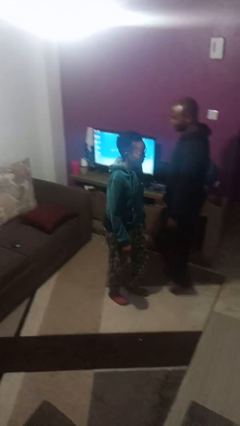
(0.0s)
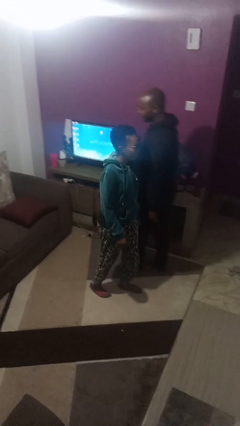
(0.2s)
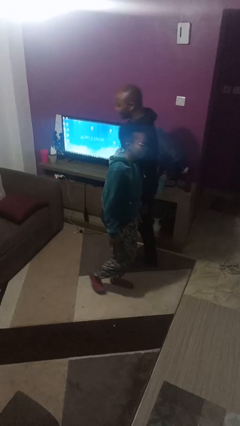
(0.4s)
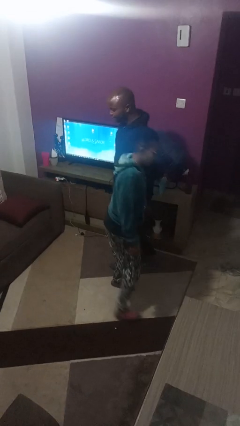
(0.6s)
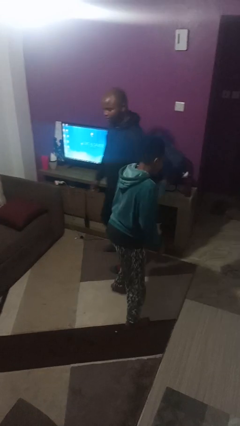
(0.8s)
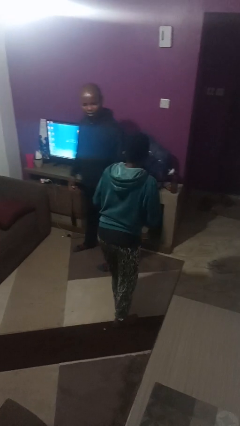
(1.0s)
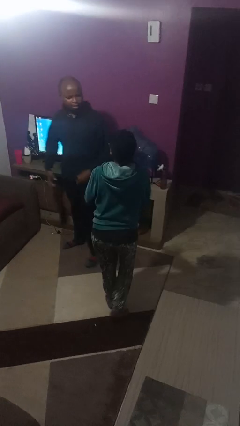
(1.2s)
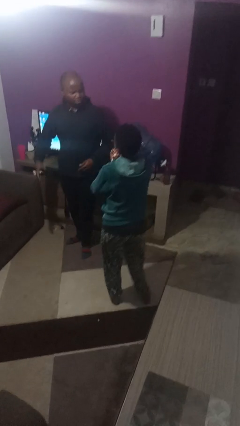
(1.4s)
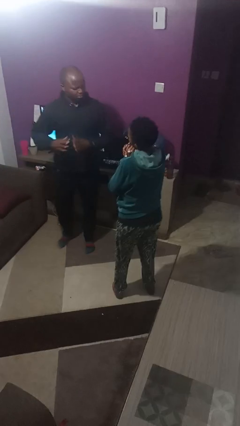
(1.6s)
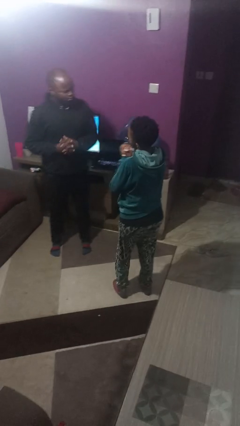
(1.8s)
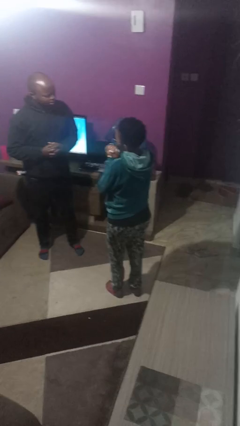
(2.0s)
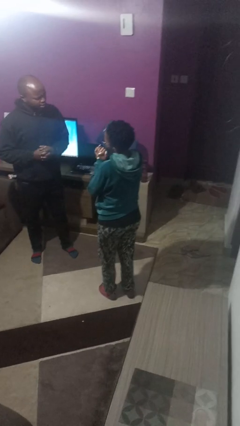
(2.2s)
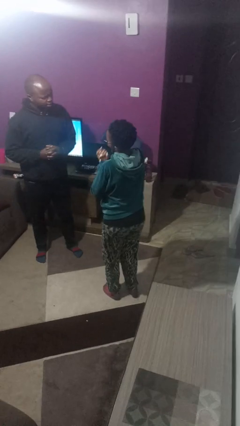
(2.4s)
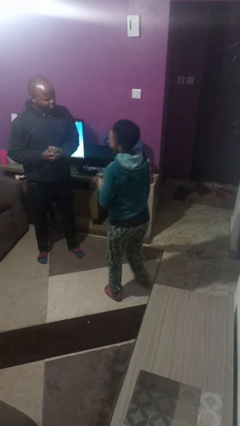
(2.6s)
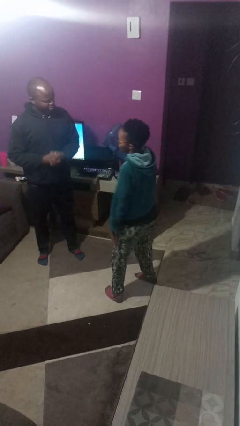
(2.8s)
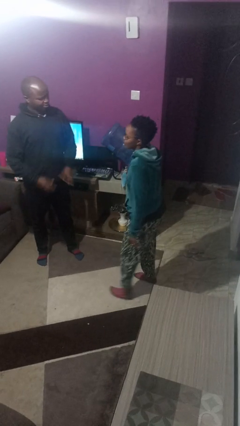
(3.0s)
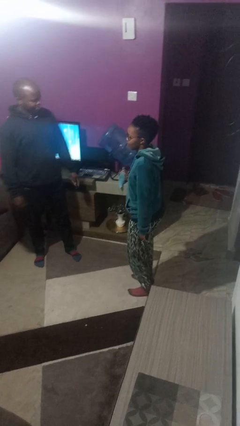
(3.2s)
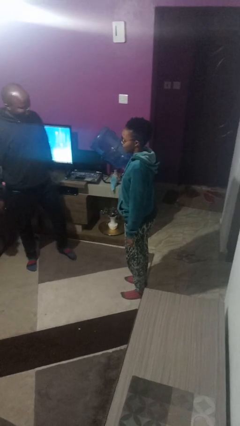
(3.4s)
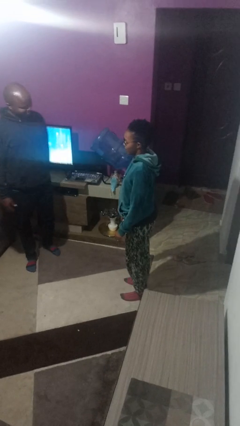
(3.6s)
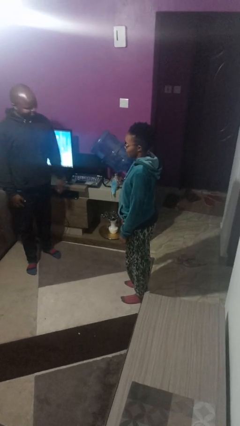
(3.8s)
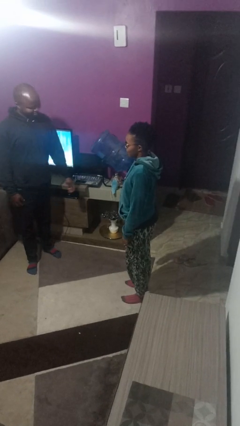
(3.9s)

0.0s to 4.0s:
person bumps into person

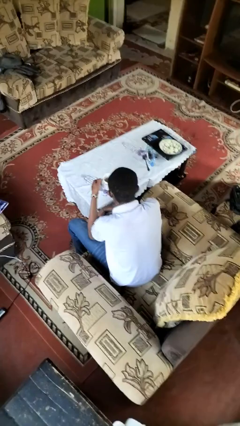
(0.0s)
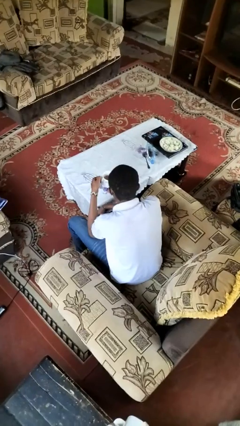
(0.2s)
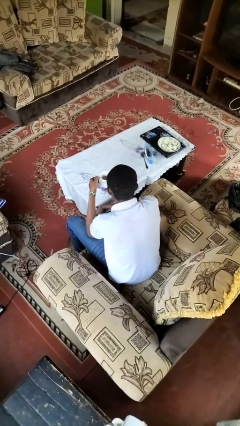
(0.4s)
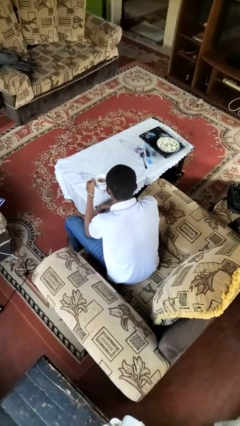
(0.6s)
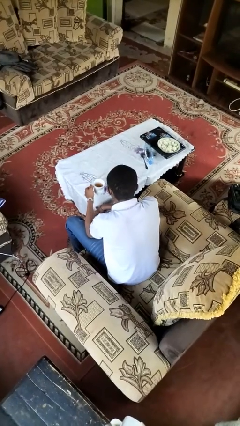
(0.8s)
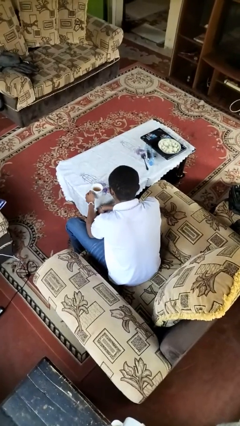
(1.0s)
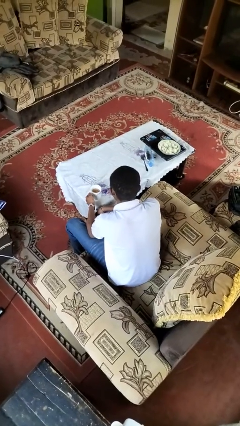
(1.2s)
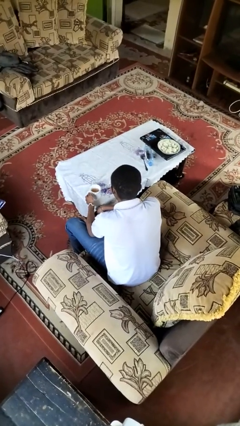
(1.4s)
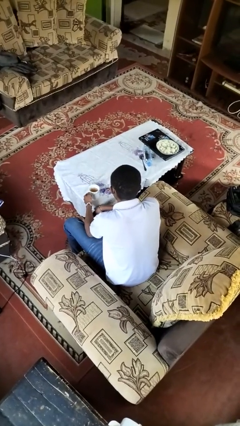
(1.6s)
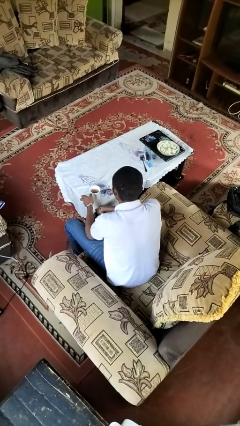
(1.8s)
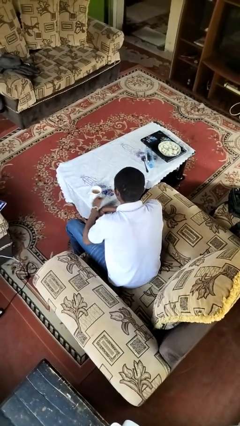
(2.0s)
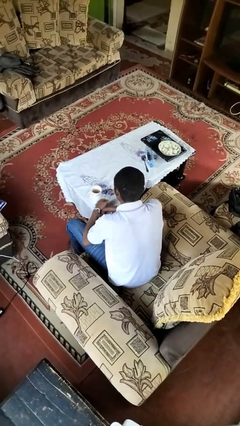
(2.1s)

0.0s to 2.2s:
person puts down object on table

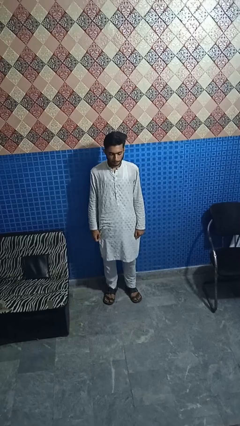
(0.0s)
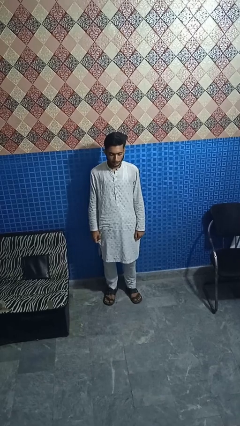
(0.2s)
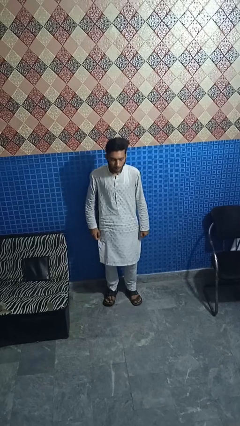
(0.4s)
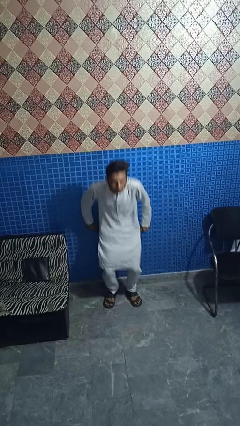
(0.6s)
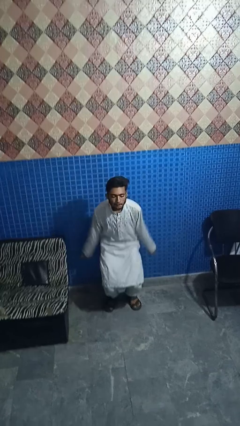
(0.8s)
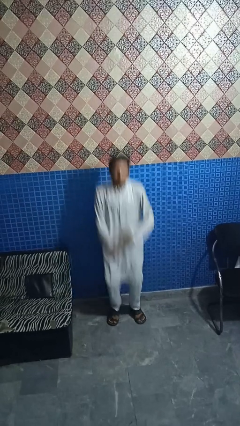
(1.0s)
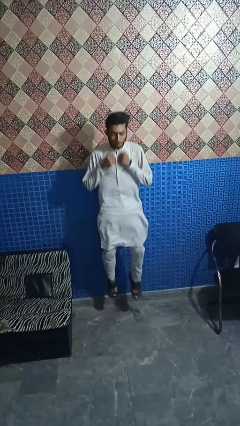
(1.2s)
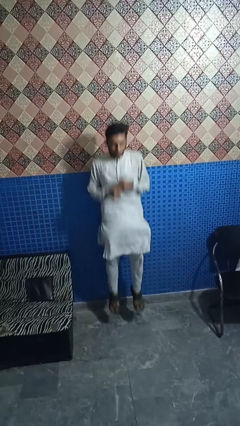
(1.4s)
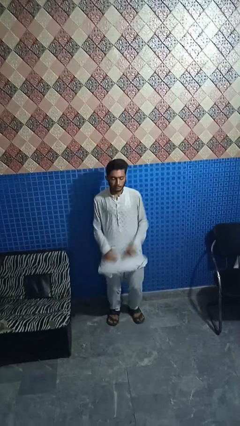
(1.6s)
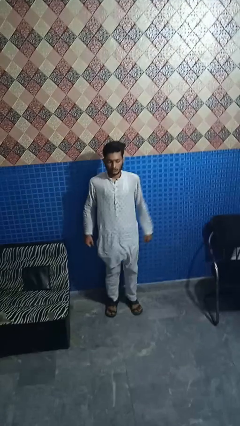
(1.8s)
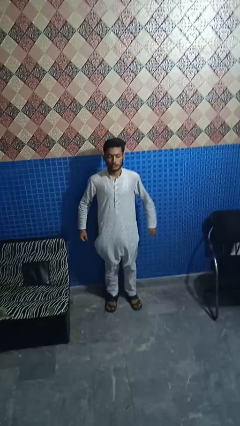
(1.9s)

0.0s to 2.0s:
person jumps

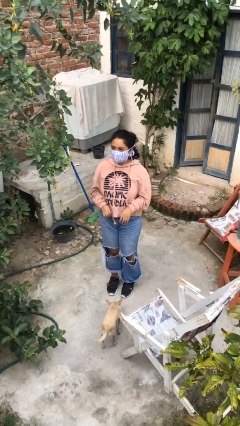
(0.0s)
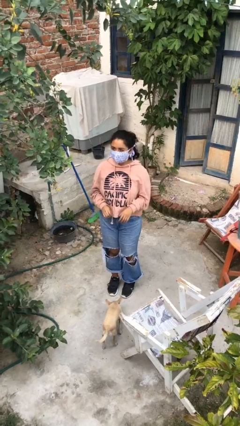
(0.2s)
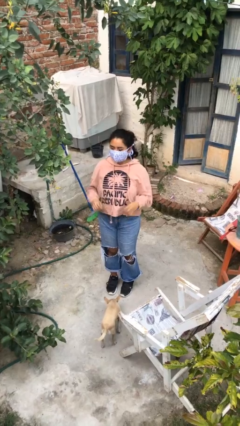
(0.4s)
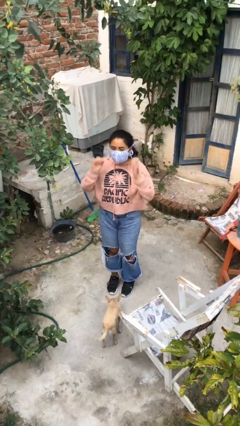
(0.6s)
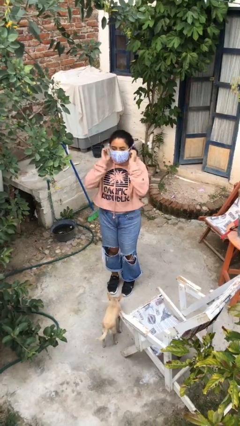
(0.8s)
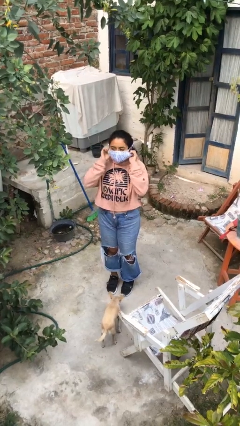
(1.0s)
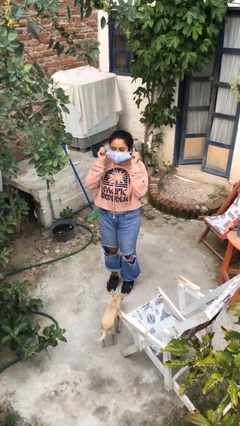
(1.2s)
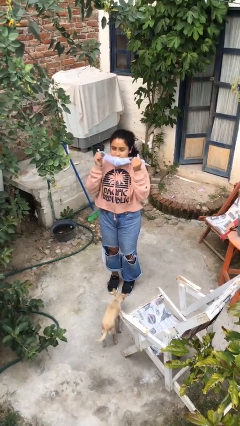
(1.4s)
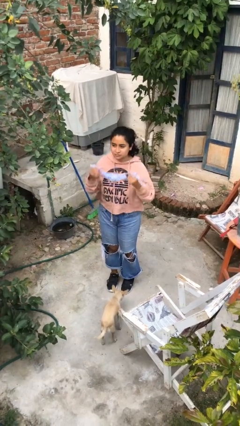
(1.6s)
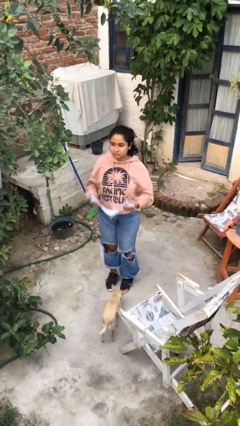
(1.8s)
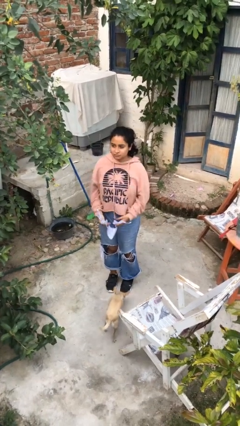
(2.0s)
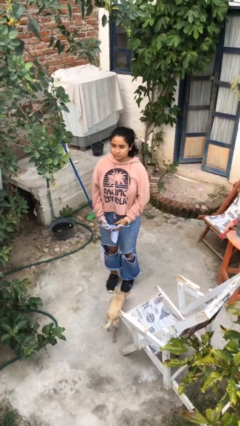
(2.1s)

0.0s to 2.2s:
person takes off facemask

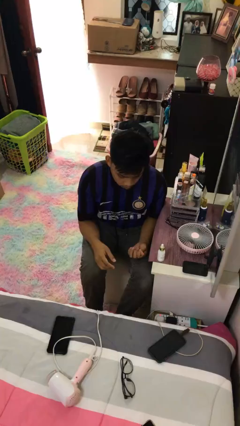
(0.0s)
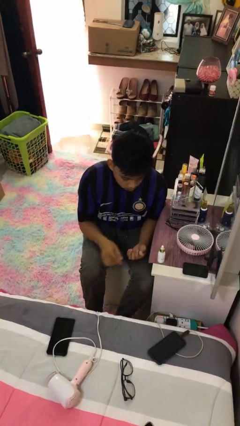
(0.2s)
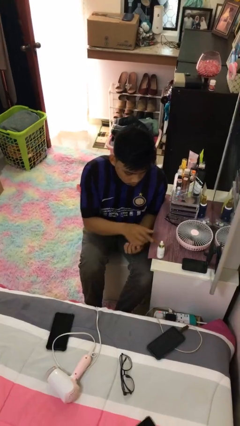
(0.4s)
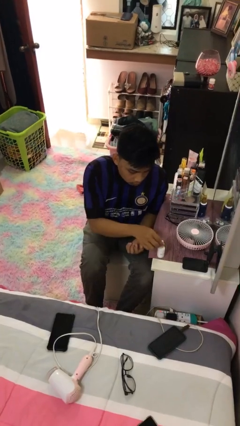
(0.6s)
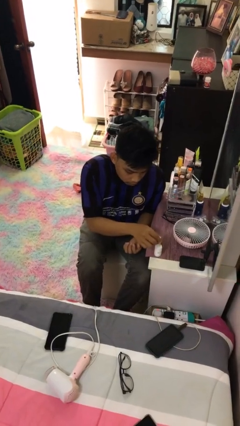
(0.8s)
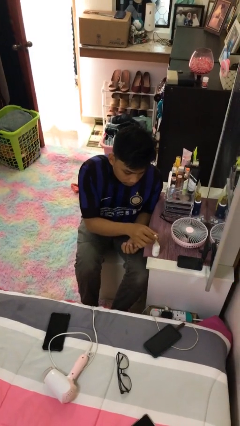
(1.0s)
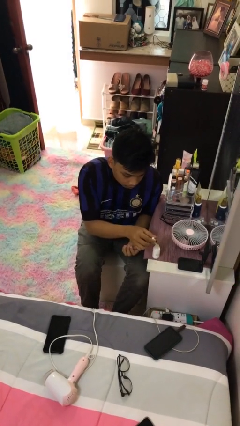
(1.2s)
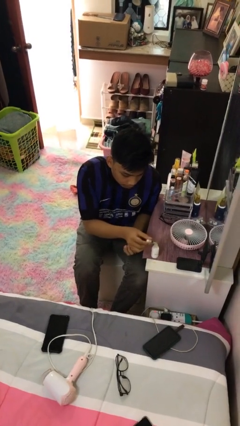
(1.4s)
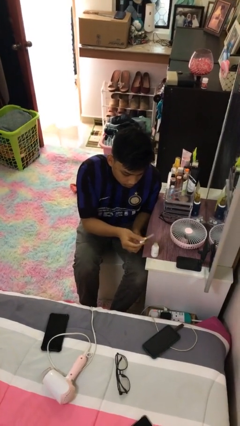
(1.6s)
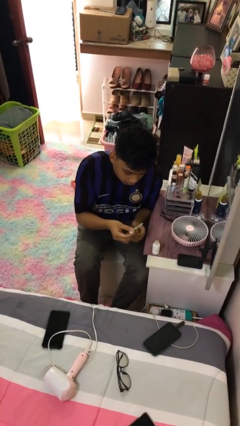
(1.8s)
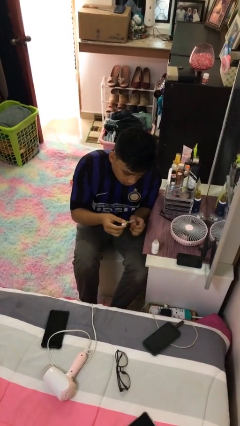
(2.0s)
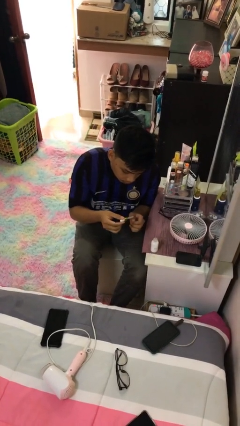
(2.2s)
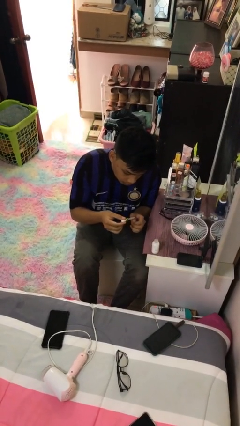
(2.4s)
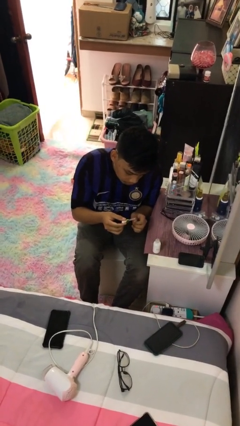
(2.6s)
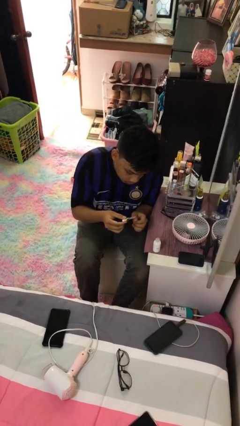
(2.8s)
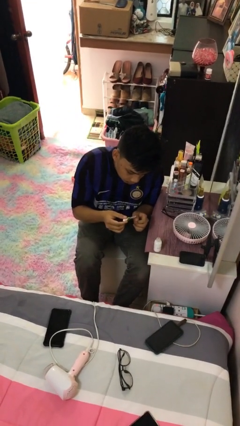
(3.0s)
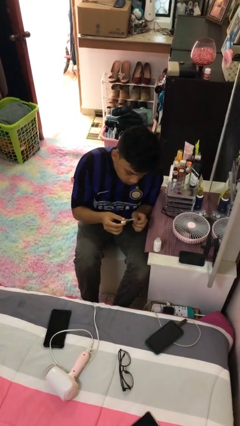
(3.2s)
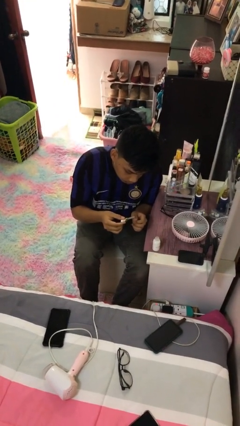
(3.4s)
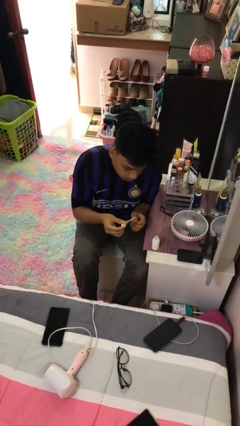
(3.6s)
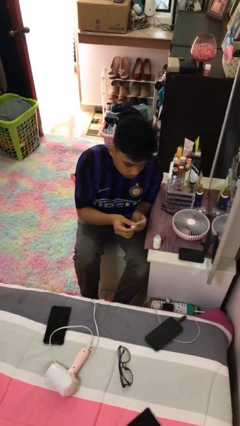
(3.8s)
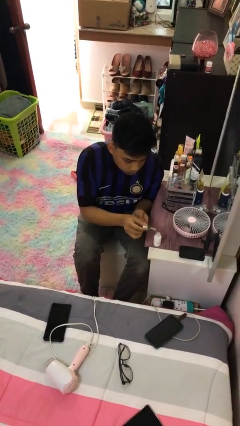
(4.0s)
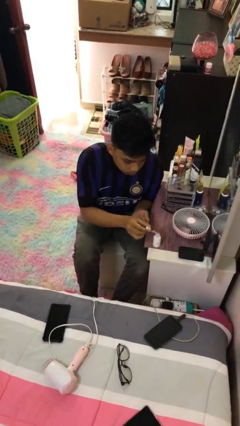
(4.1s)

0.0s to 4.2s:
person paints fingernails

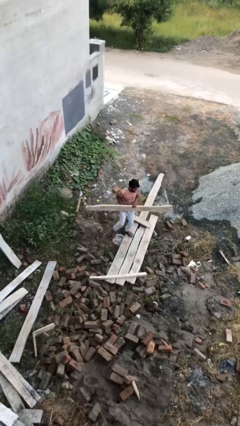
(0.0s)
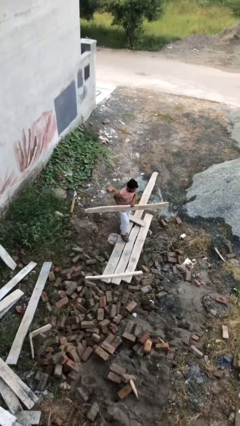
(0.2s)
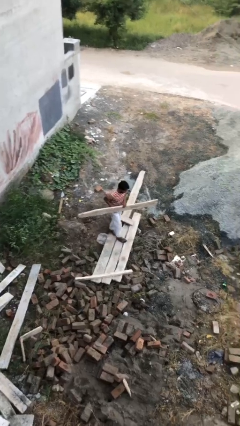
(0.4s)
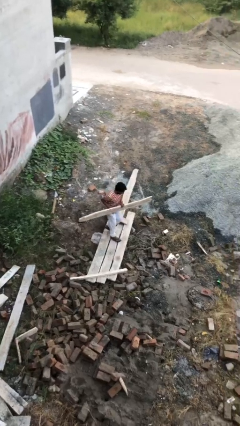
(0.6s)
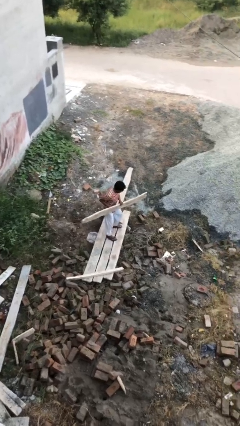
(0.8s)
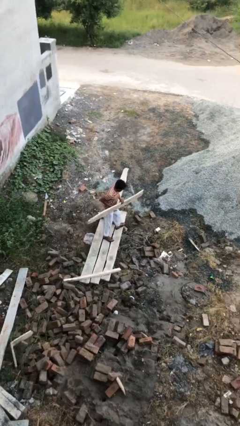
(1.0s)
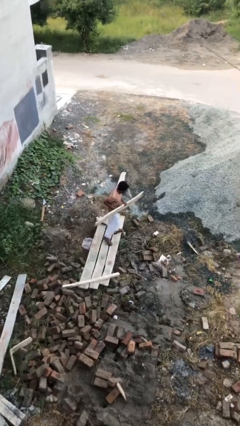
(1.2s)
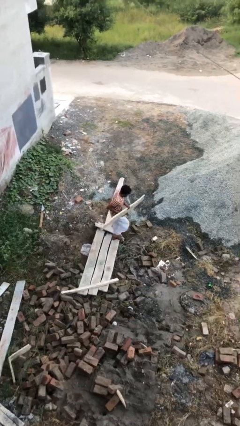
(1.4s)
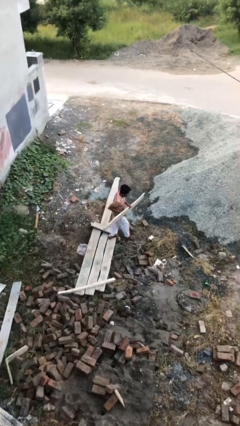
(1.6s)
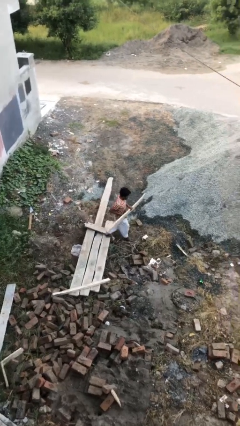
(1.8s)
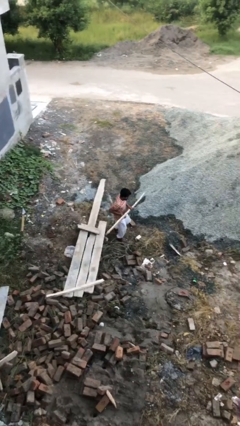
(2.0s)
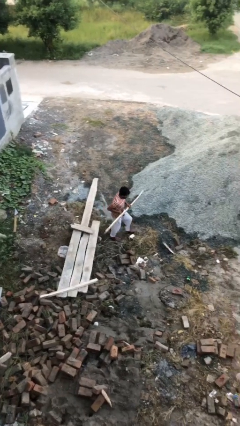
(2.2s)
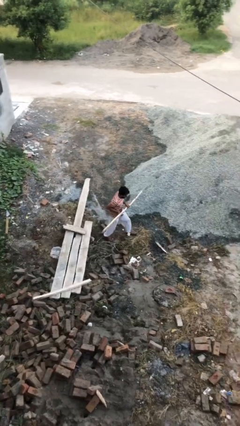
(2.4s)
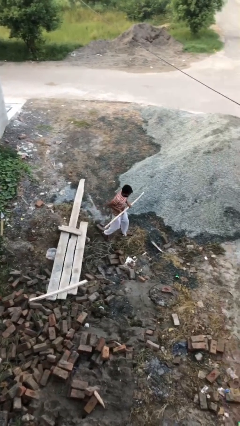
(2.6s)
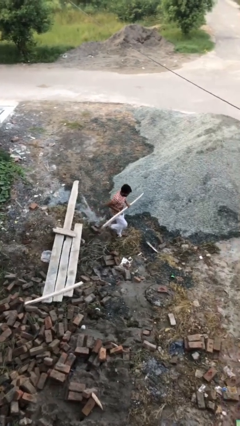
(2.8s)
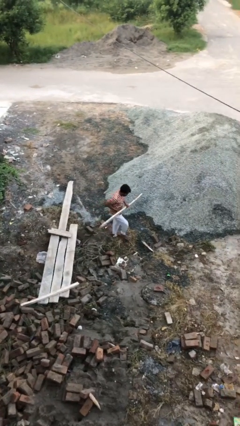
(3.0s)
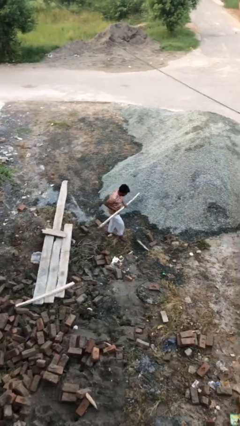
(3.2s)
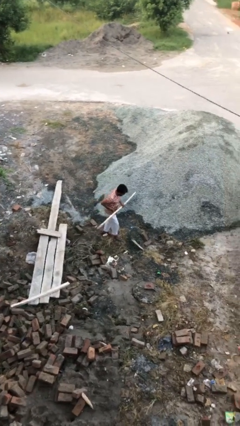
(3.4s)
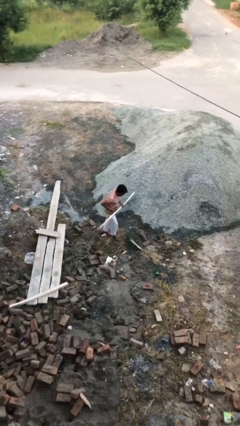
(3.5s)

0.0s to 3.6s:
person carries heavy object
